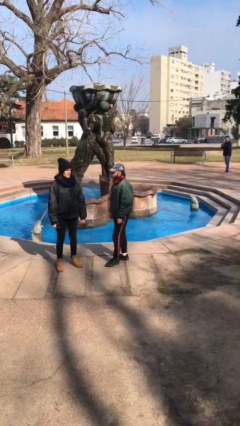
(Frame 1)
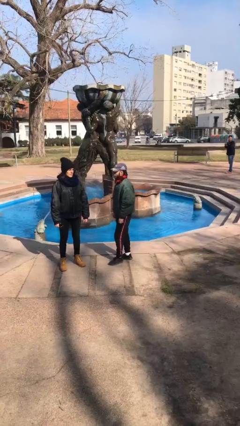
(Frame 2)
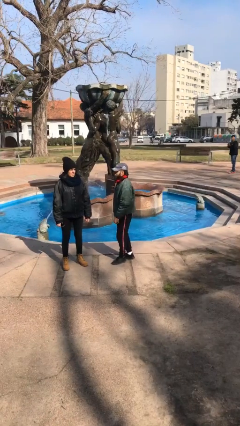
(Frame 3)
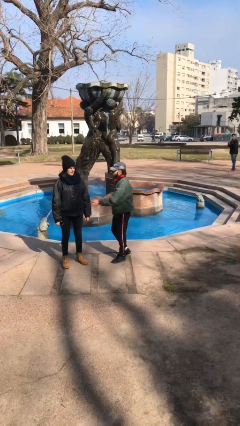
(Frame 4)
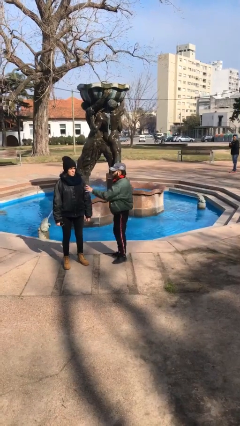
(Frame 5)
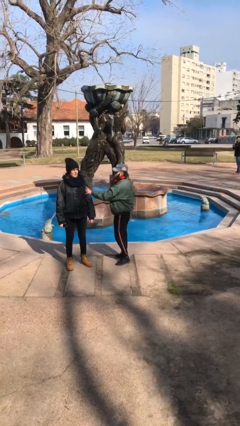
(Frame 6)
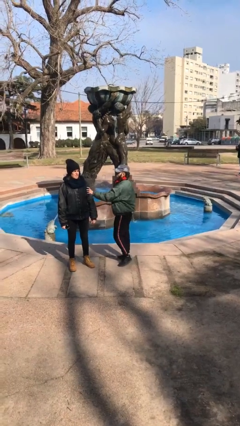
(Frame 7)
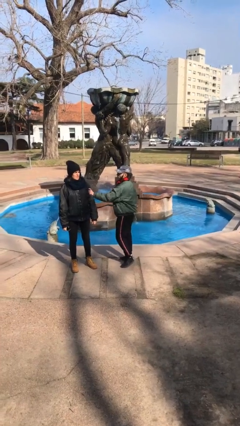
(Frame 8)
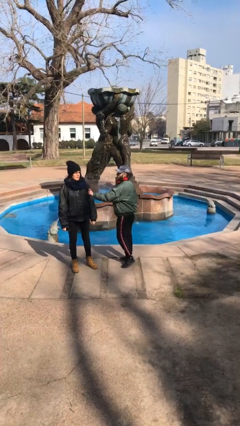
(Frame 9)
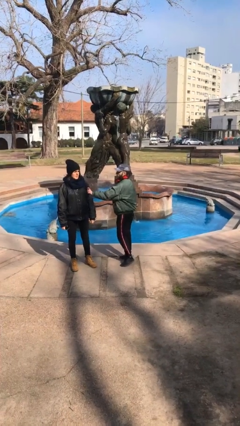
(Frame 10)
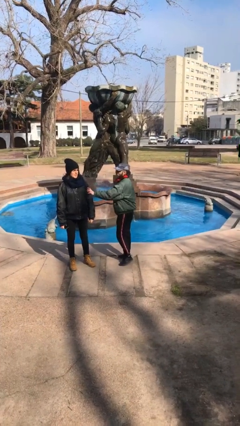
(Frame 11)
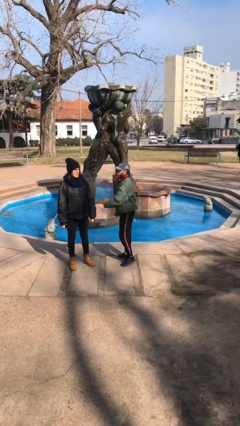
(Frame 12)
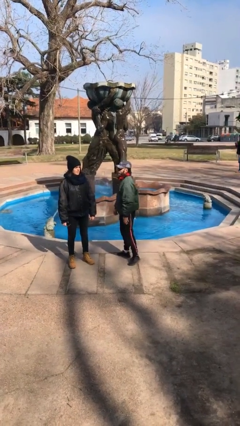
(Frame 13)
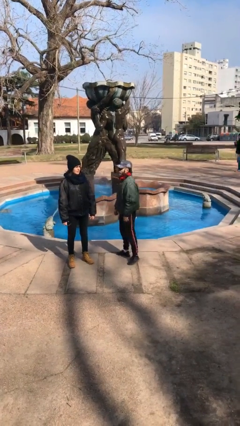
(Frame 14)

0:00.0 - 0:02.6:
person grabs person by bicep

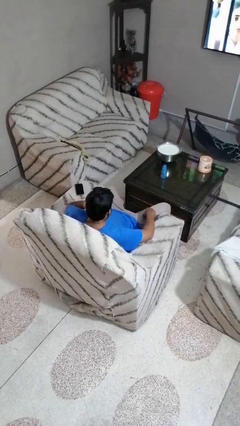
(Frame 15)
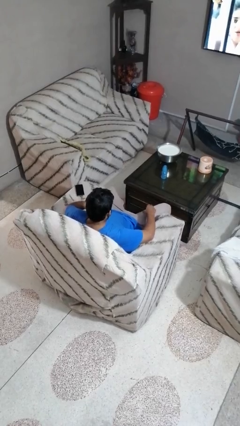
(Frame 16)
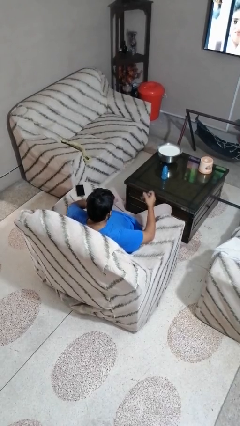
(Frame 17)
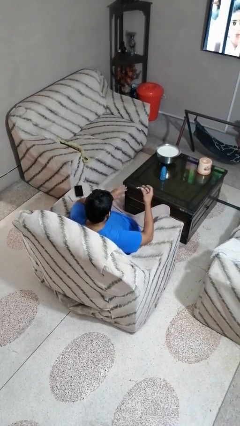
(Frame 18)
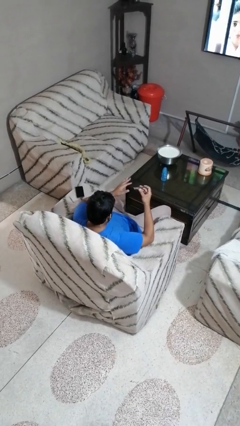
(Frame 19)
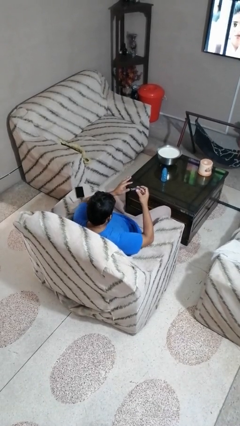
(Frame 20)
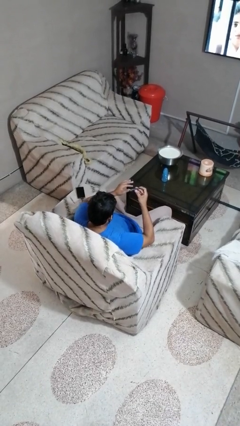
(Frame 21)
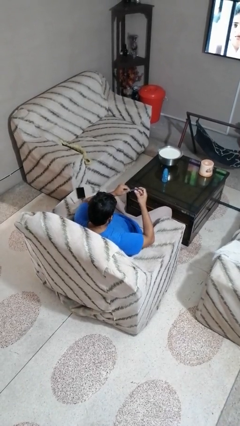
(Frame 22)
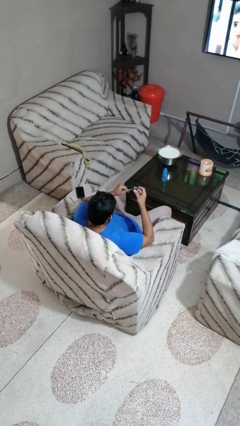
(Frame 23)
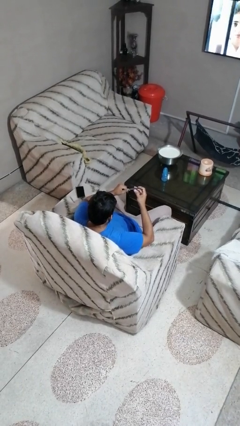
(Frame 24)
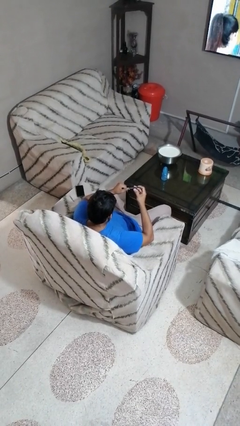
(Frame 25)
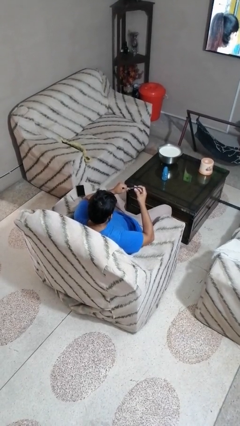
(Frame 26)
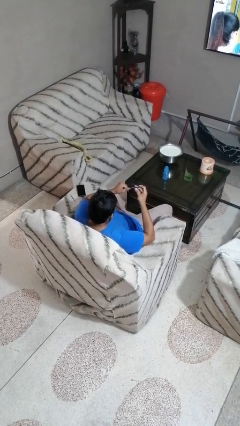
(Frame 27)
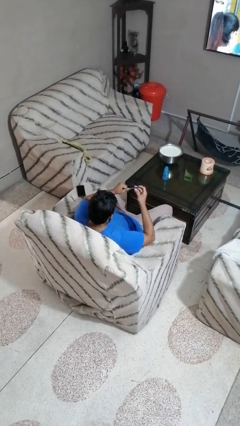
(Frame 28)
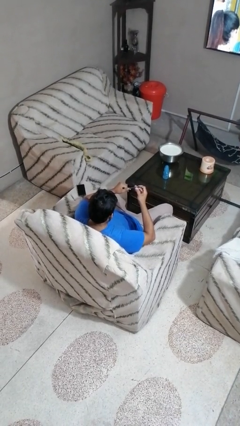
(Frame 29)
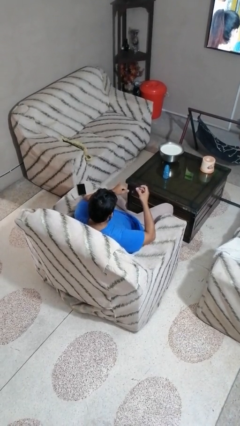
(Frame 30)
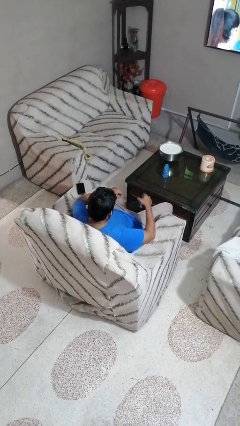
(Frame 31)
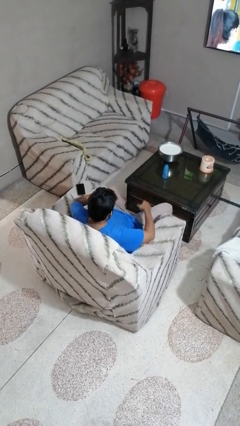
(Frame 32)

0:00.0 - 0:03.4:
person clips fingernails

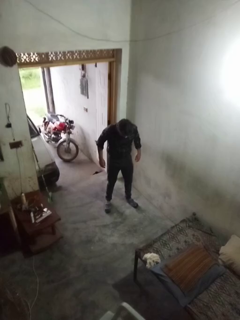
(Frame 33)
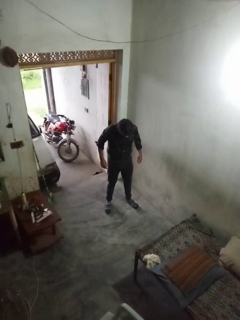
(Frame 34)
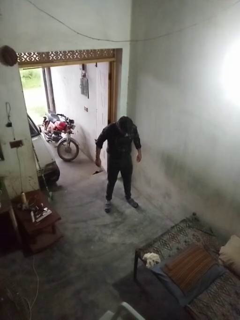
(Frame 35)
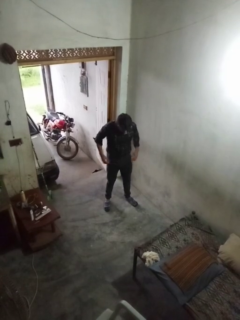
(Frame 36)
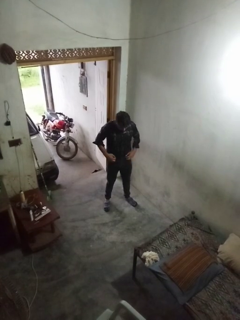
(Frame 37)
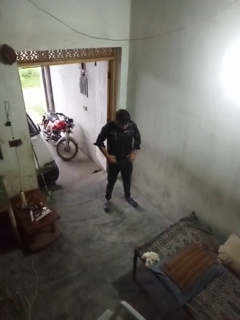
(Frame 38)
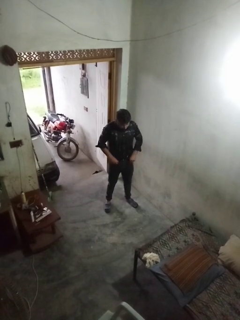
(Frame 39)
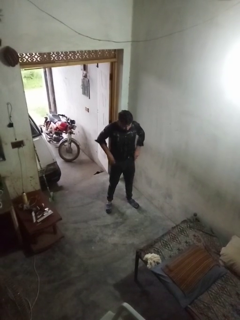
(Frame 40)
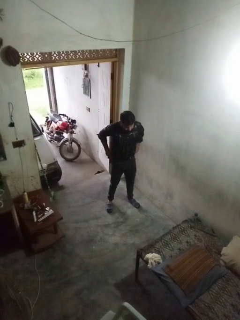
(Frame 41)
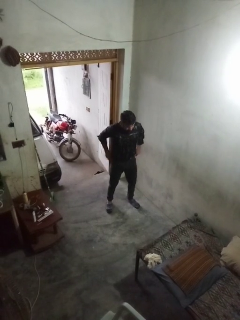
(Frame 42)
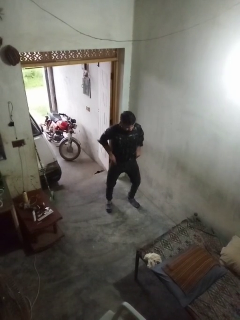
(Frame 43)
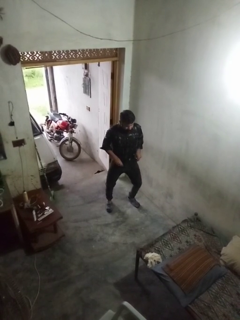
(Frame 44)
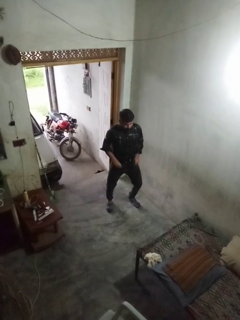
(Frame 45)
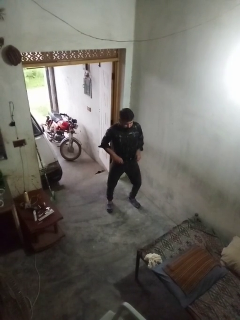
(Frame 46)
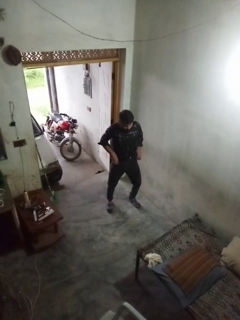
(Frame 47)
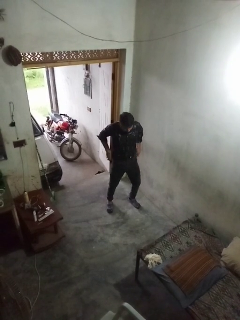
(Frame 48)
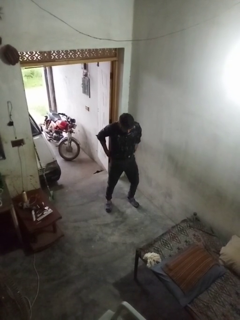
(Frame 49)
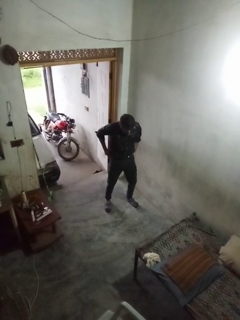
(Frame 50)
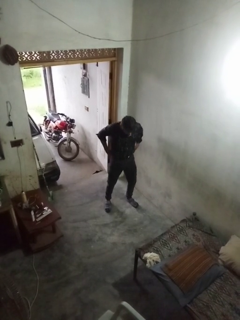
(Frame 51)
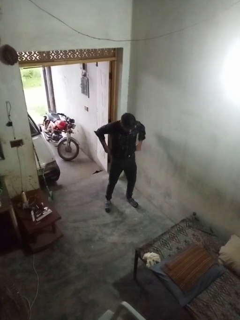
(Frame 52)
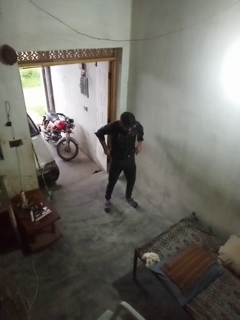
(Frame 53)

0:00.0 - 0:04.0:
person hikes up pants

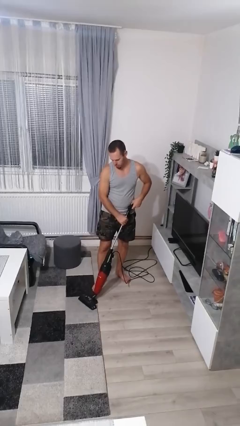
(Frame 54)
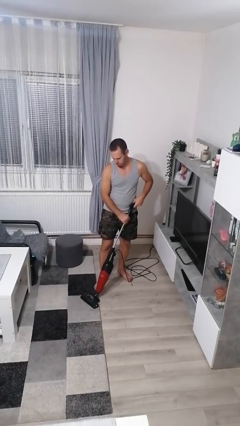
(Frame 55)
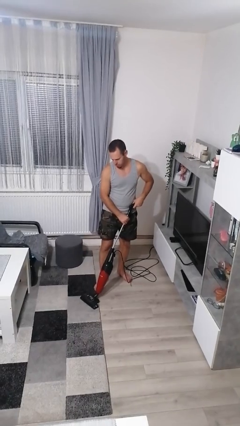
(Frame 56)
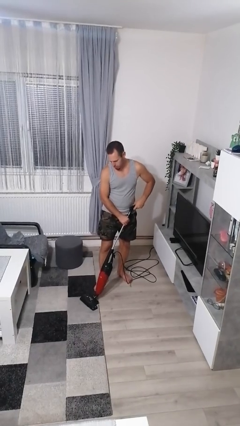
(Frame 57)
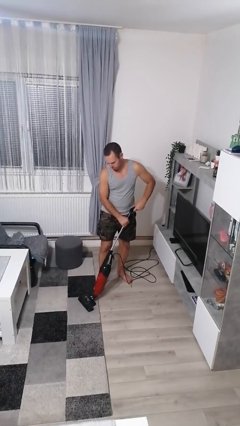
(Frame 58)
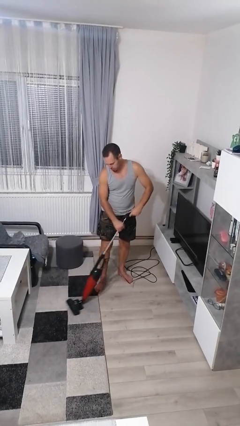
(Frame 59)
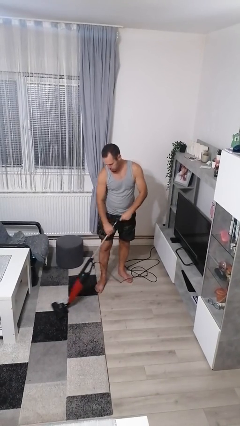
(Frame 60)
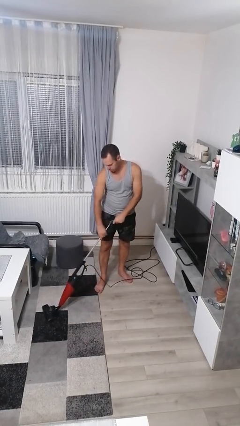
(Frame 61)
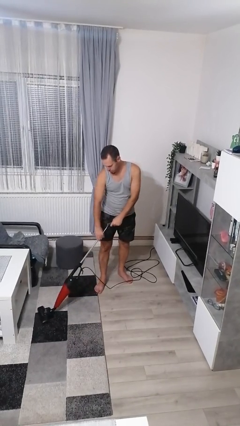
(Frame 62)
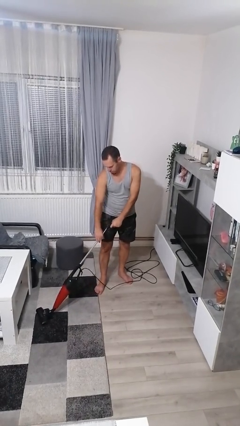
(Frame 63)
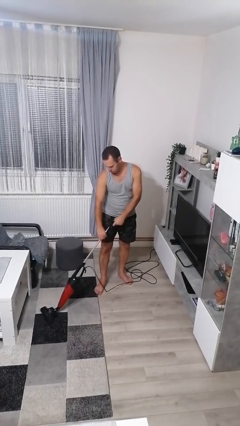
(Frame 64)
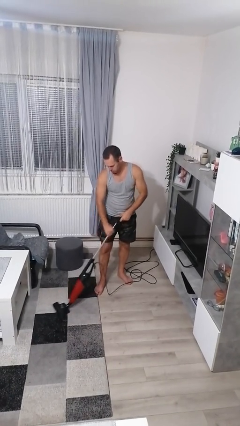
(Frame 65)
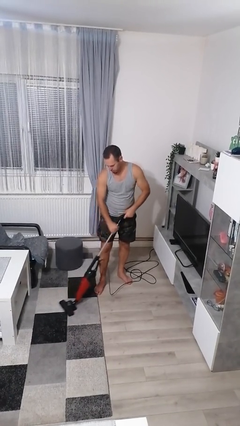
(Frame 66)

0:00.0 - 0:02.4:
person vacuums carpet

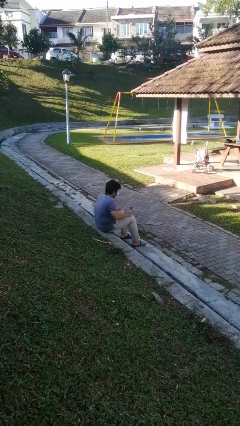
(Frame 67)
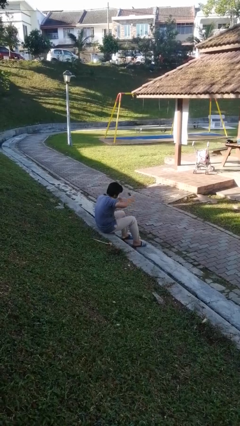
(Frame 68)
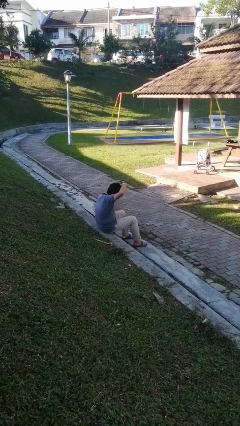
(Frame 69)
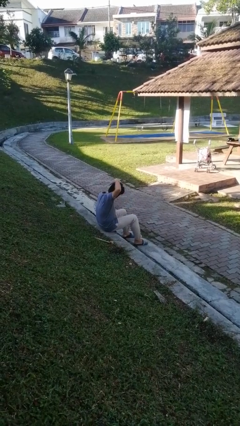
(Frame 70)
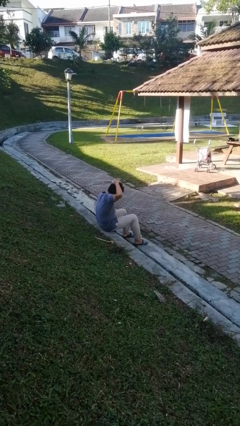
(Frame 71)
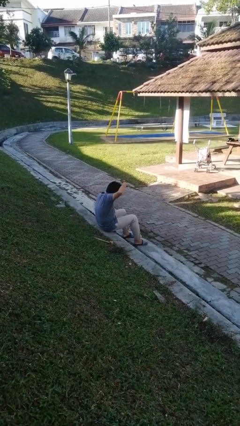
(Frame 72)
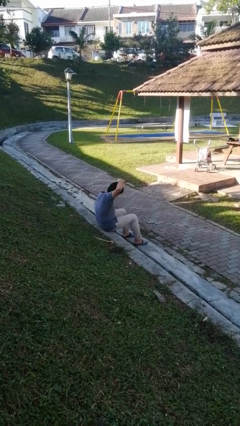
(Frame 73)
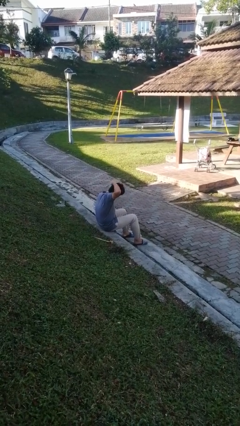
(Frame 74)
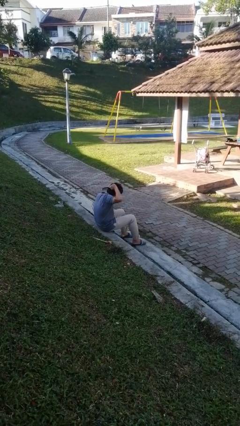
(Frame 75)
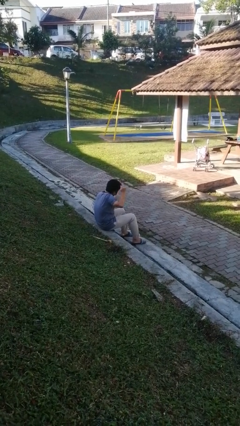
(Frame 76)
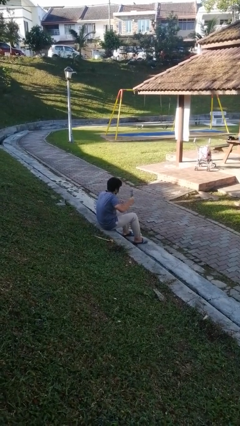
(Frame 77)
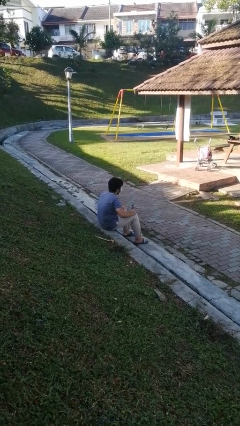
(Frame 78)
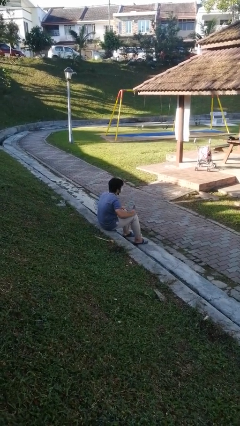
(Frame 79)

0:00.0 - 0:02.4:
person brushes hair

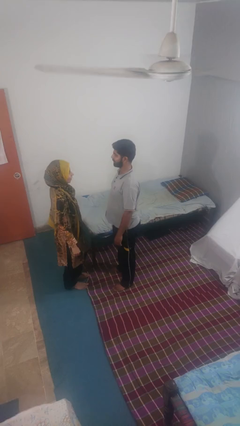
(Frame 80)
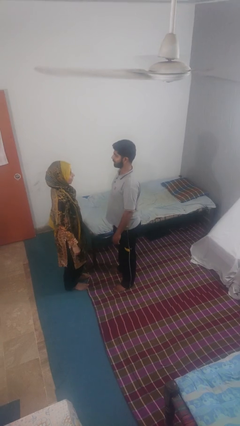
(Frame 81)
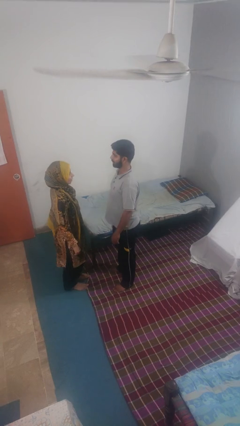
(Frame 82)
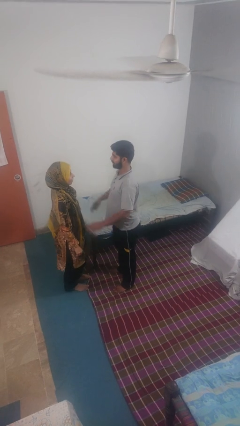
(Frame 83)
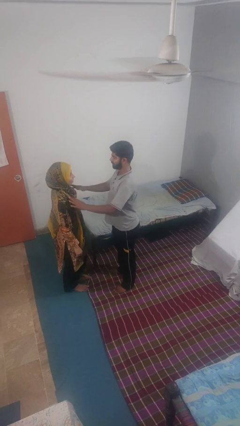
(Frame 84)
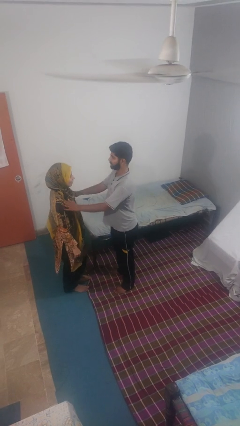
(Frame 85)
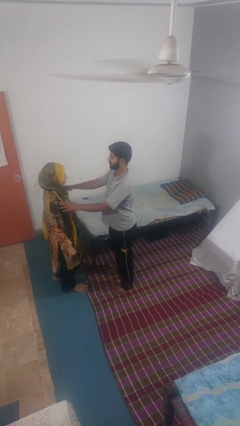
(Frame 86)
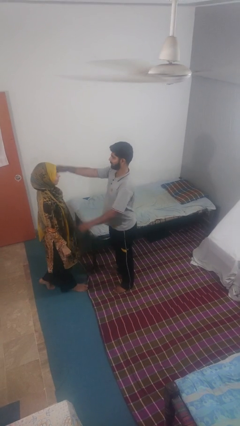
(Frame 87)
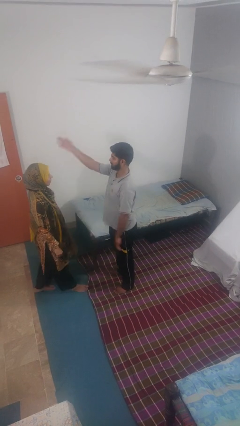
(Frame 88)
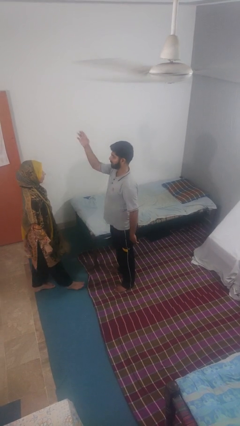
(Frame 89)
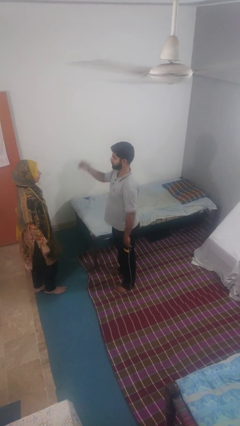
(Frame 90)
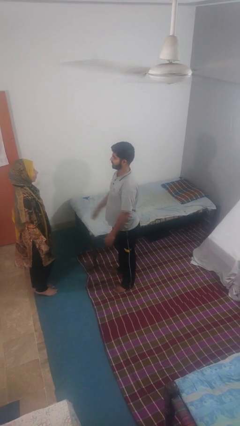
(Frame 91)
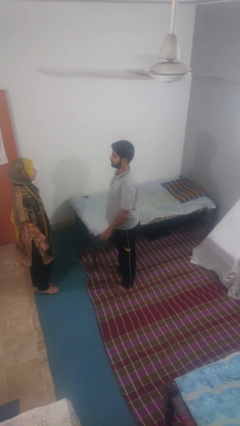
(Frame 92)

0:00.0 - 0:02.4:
person shoves person

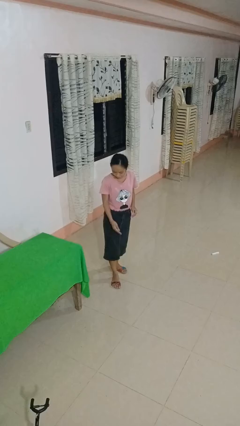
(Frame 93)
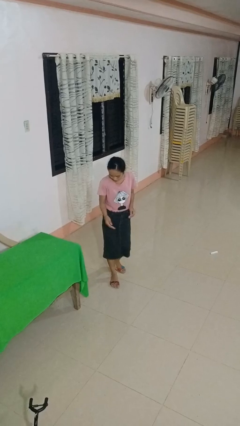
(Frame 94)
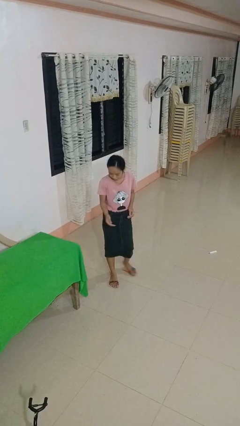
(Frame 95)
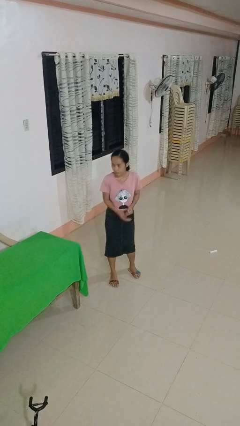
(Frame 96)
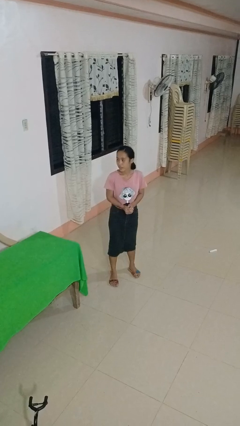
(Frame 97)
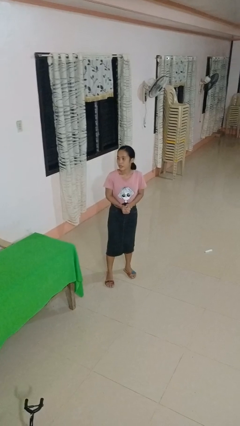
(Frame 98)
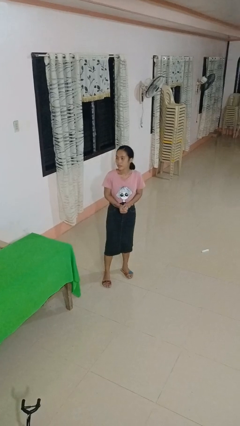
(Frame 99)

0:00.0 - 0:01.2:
person slaps hands on thighs
